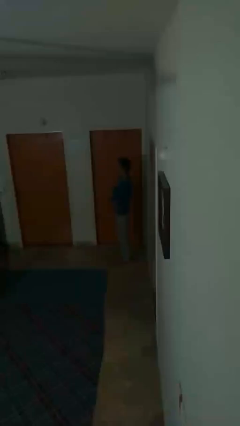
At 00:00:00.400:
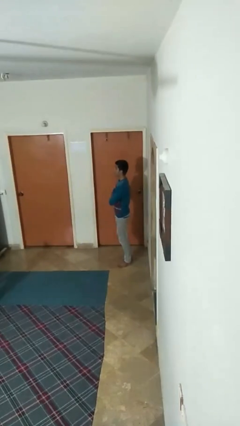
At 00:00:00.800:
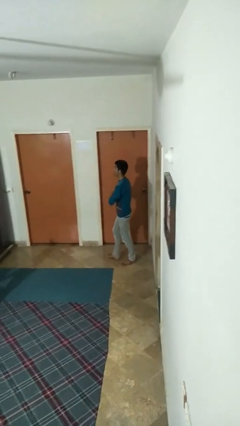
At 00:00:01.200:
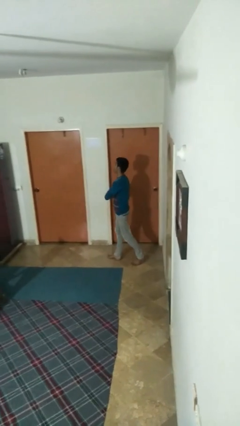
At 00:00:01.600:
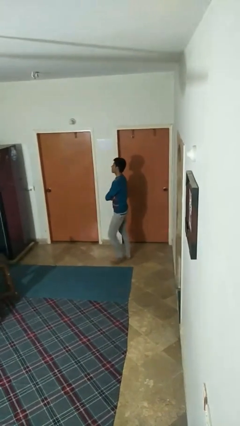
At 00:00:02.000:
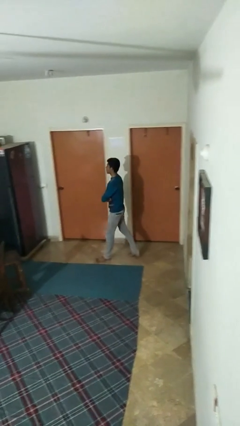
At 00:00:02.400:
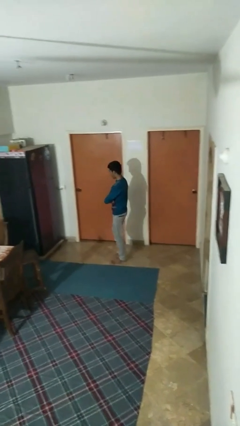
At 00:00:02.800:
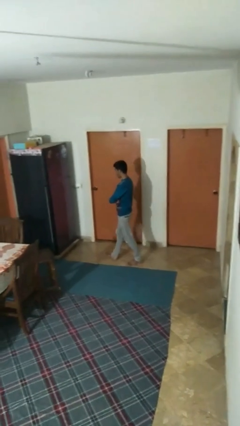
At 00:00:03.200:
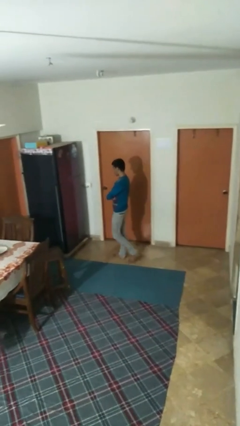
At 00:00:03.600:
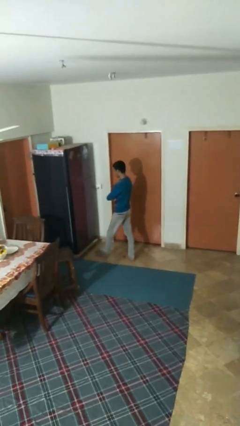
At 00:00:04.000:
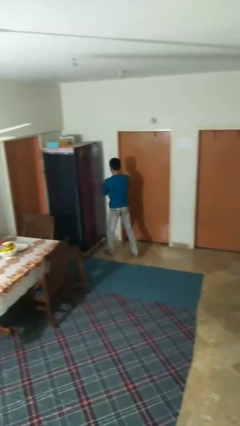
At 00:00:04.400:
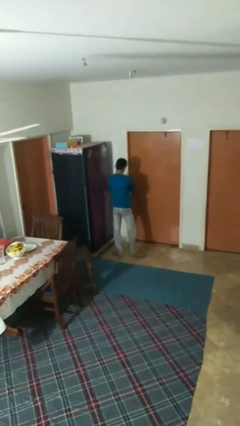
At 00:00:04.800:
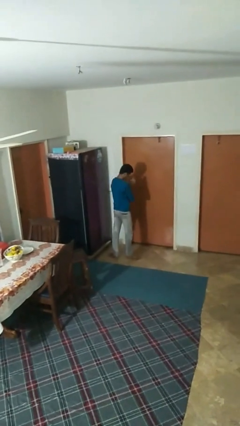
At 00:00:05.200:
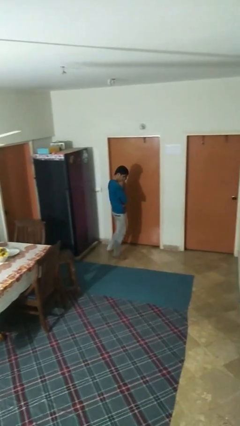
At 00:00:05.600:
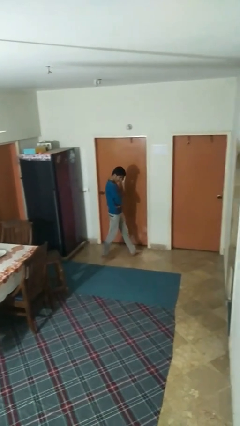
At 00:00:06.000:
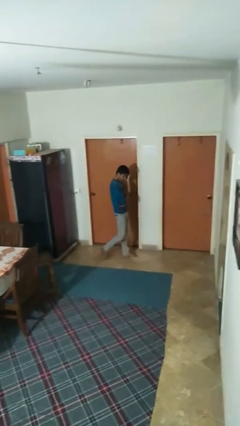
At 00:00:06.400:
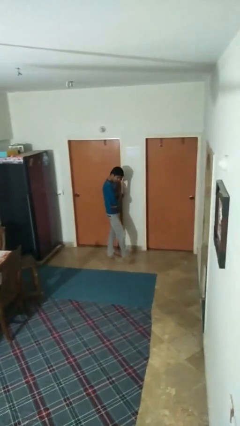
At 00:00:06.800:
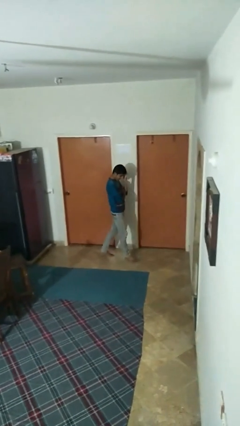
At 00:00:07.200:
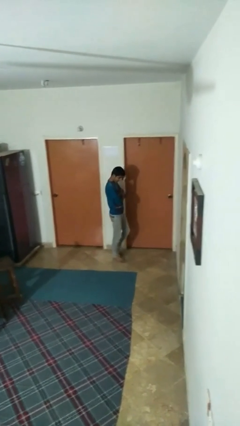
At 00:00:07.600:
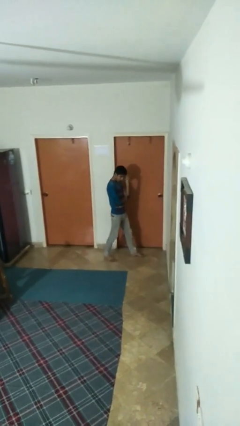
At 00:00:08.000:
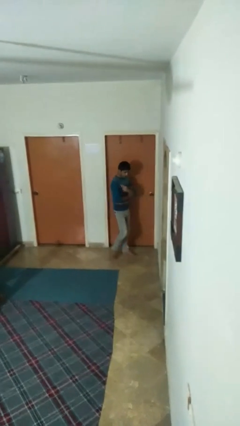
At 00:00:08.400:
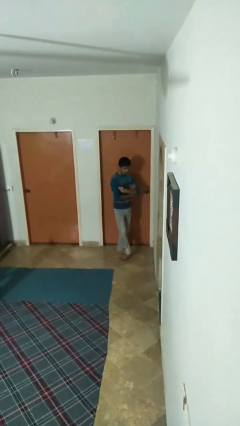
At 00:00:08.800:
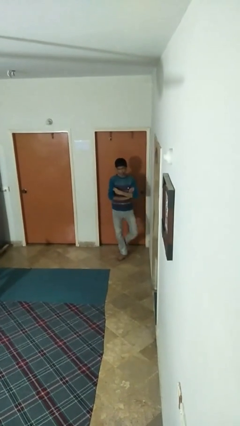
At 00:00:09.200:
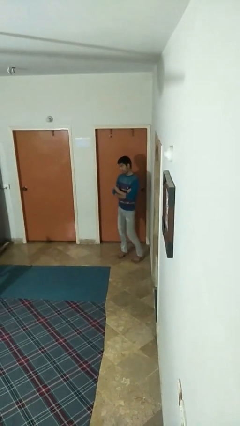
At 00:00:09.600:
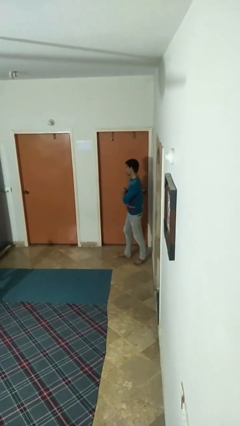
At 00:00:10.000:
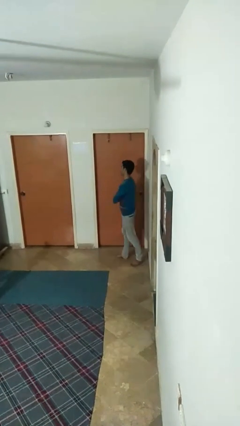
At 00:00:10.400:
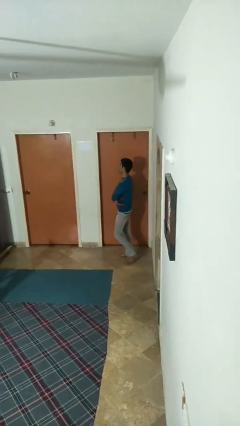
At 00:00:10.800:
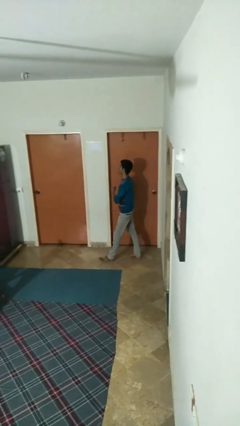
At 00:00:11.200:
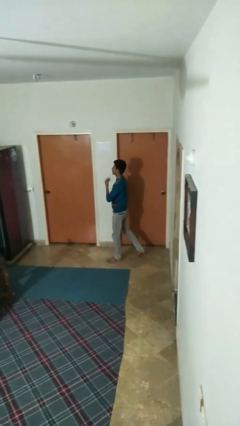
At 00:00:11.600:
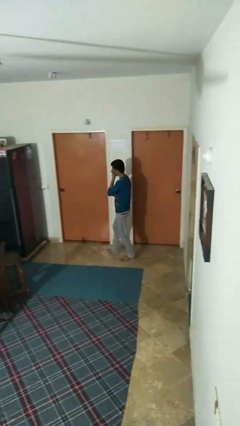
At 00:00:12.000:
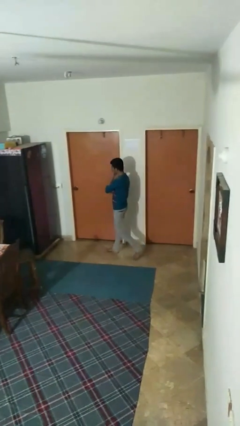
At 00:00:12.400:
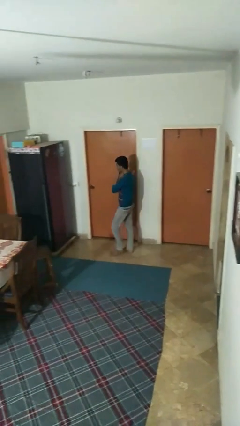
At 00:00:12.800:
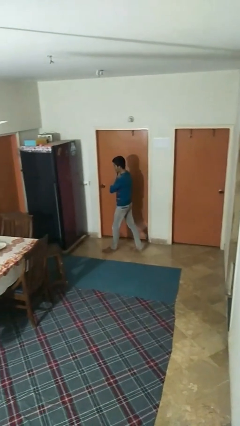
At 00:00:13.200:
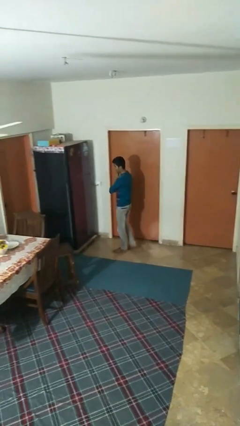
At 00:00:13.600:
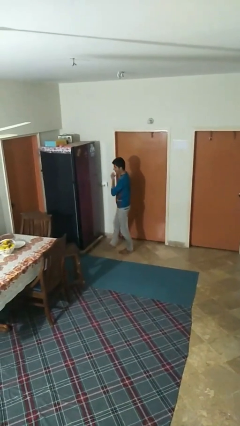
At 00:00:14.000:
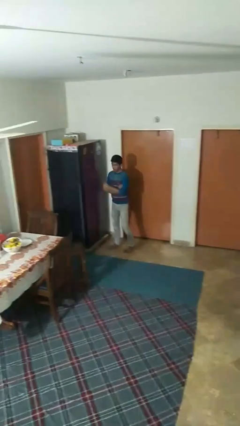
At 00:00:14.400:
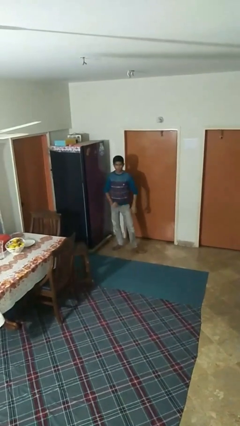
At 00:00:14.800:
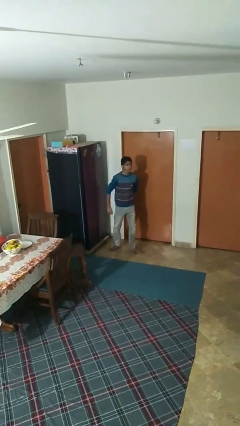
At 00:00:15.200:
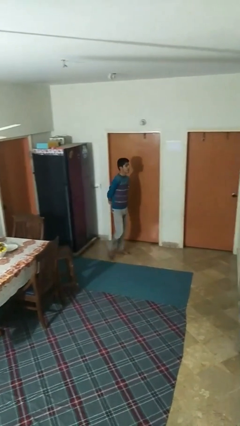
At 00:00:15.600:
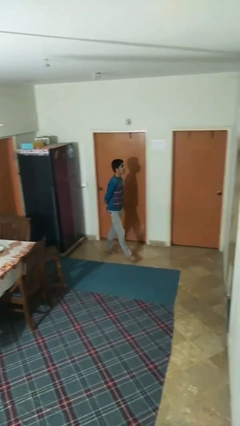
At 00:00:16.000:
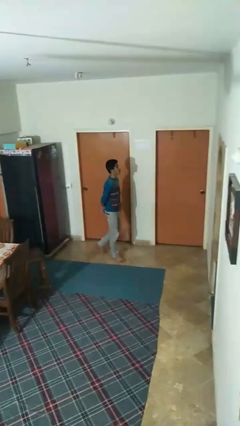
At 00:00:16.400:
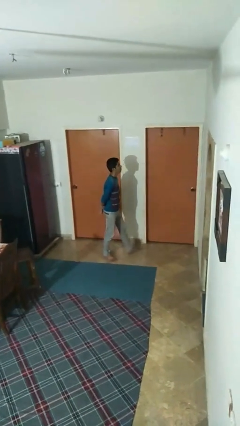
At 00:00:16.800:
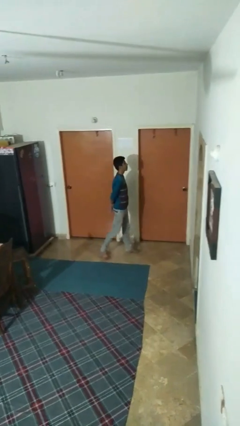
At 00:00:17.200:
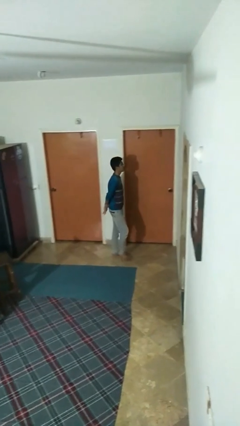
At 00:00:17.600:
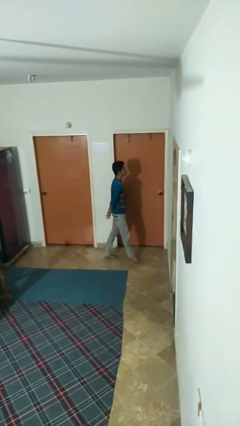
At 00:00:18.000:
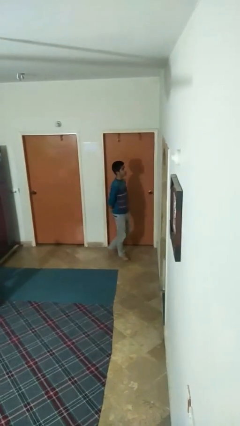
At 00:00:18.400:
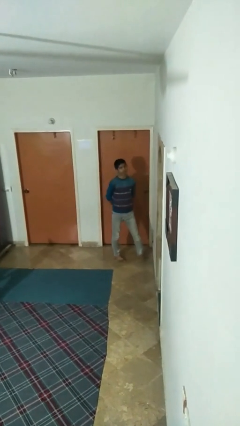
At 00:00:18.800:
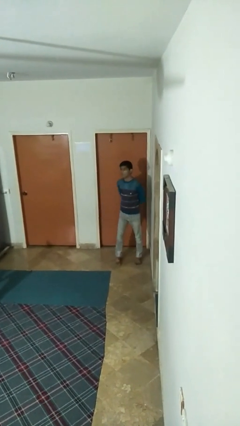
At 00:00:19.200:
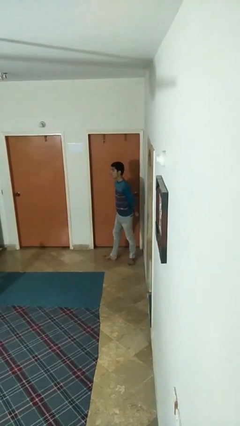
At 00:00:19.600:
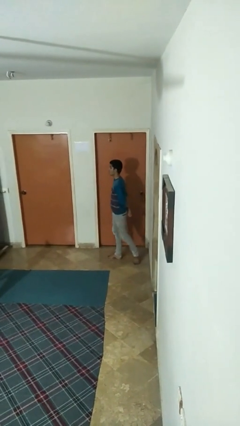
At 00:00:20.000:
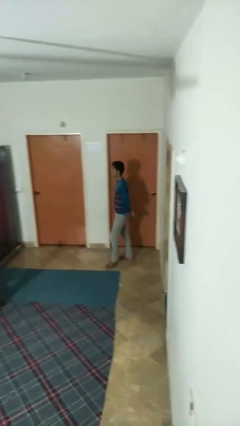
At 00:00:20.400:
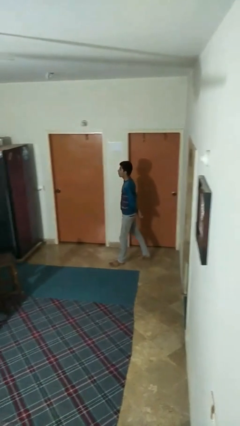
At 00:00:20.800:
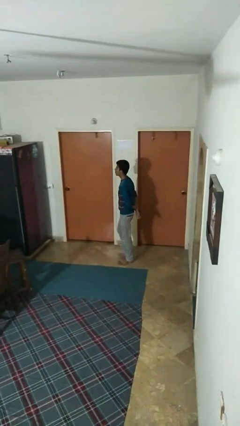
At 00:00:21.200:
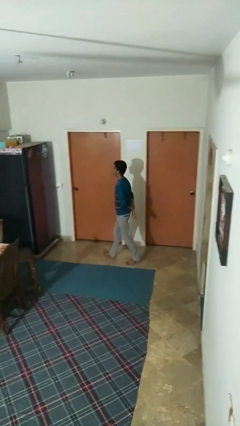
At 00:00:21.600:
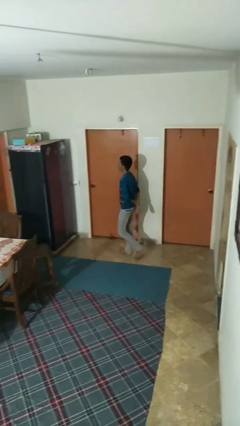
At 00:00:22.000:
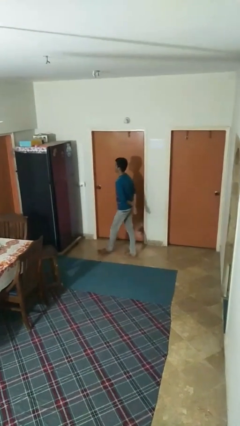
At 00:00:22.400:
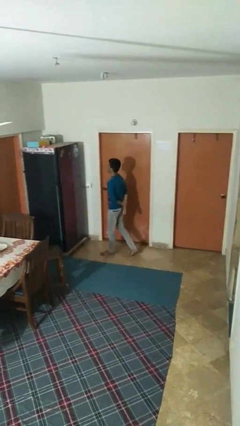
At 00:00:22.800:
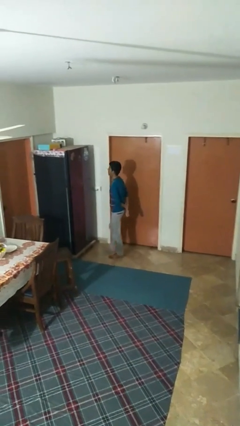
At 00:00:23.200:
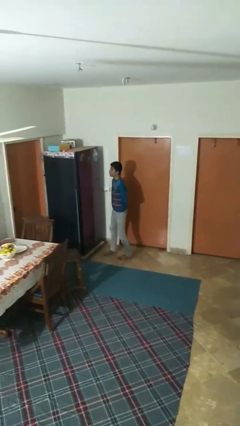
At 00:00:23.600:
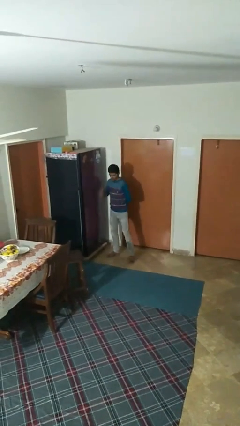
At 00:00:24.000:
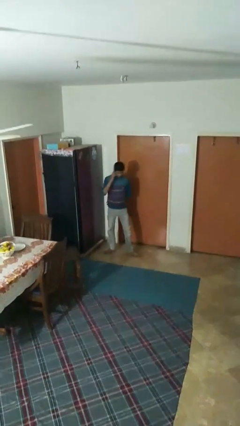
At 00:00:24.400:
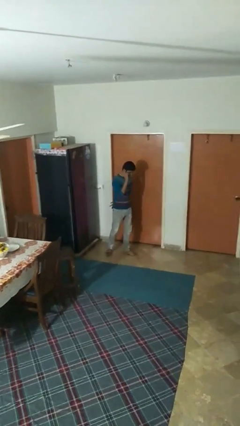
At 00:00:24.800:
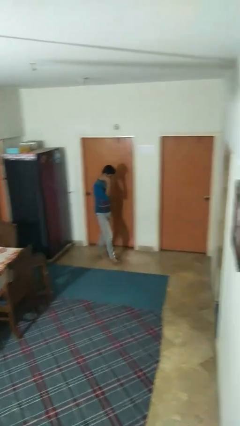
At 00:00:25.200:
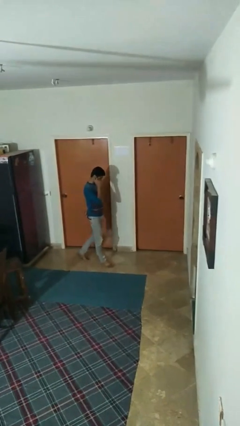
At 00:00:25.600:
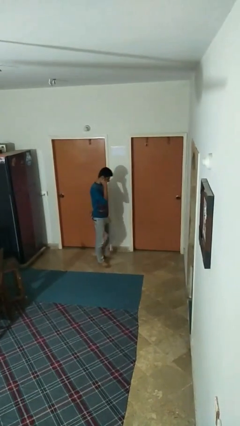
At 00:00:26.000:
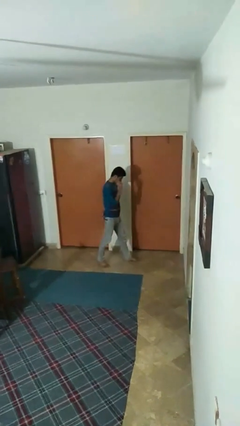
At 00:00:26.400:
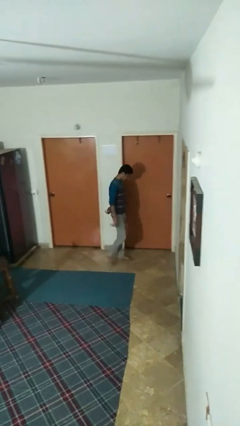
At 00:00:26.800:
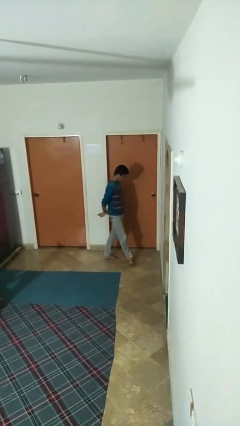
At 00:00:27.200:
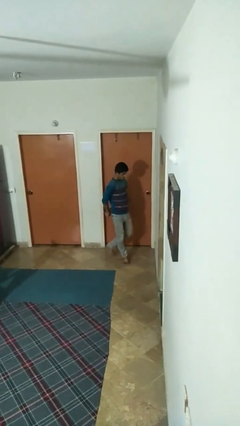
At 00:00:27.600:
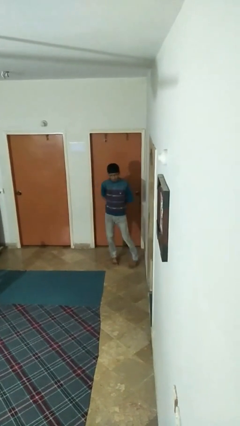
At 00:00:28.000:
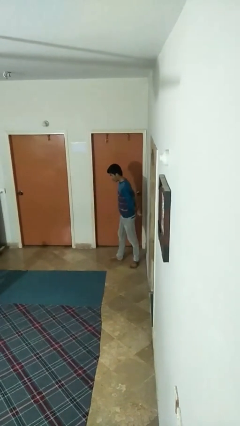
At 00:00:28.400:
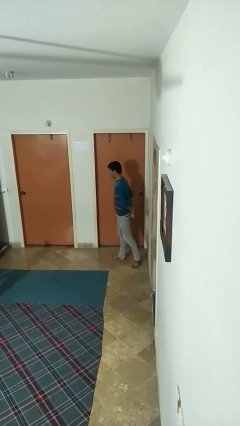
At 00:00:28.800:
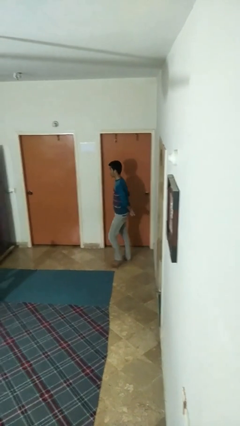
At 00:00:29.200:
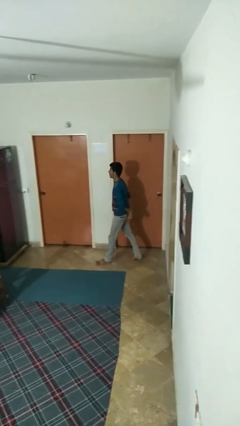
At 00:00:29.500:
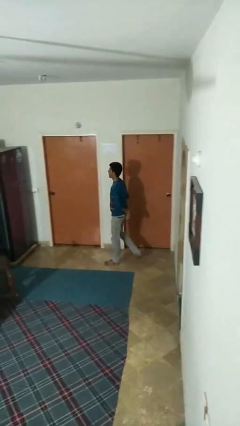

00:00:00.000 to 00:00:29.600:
person walks

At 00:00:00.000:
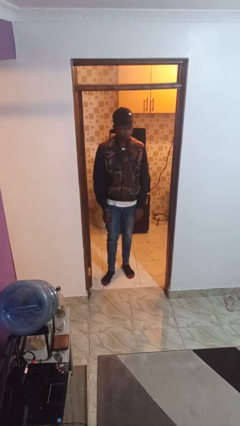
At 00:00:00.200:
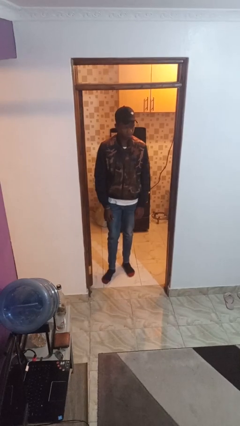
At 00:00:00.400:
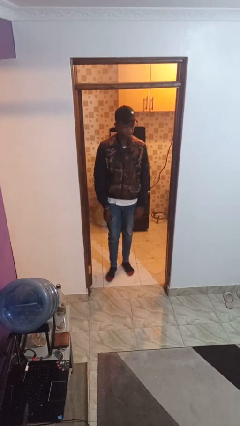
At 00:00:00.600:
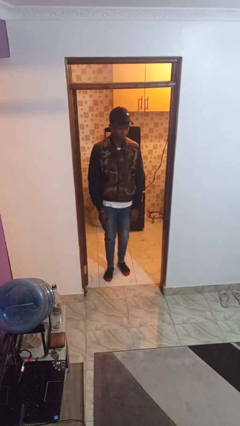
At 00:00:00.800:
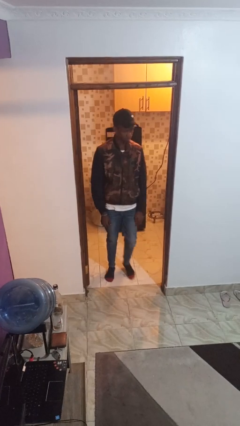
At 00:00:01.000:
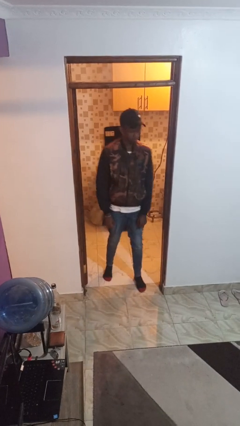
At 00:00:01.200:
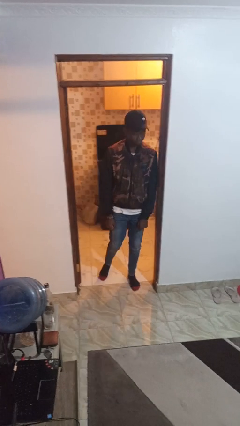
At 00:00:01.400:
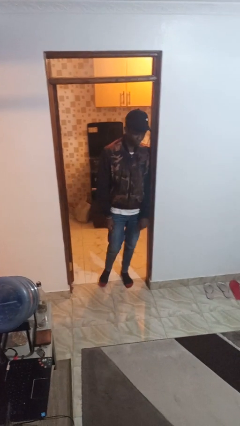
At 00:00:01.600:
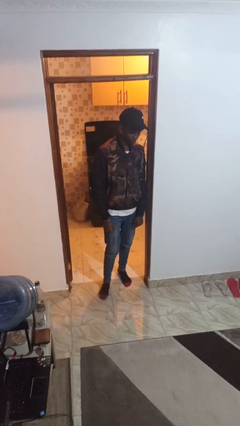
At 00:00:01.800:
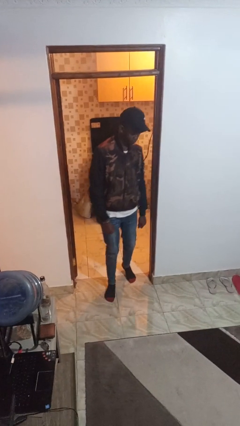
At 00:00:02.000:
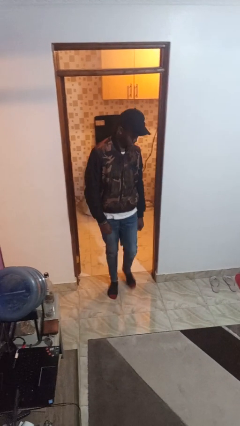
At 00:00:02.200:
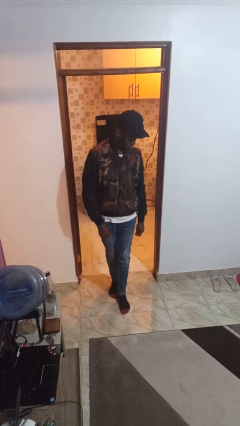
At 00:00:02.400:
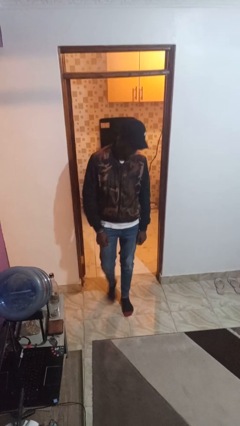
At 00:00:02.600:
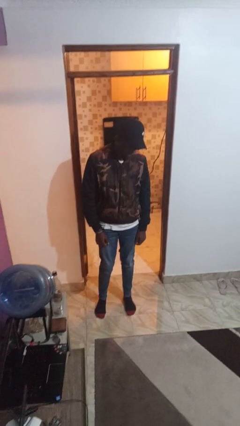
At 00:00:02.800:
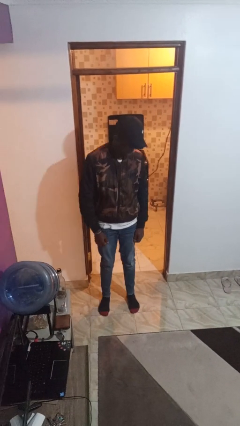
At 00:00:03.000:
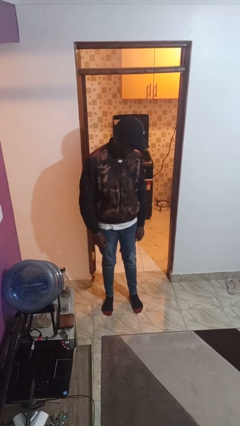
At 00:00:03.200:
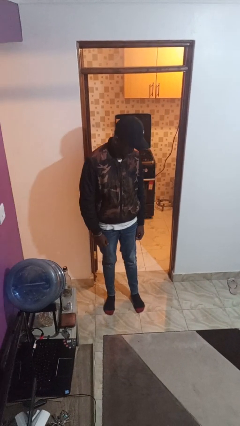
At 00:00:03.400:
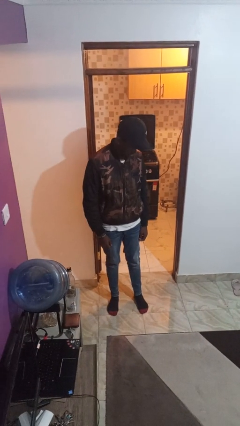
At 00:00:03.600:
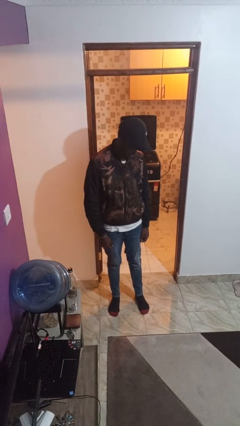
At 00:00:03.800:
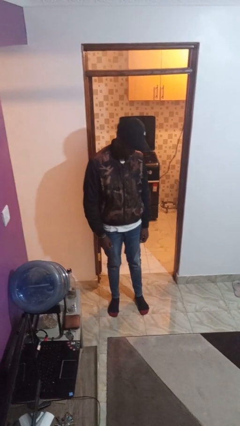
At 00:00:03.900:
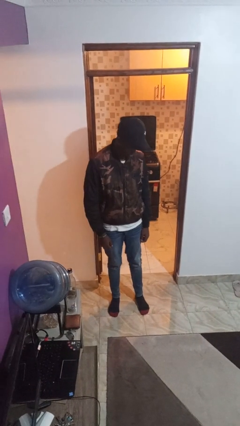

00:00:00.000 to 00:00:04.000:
person bumps into wall
